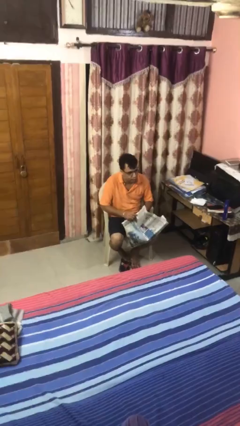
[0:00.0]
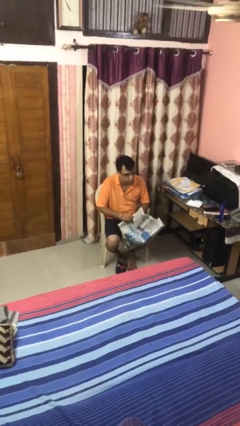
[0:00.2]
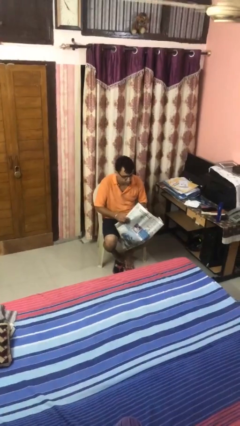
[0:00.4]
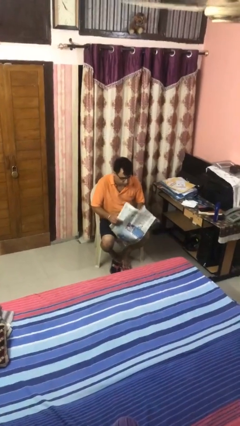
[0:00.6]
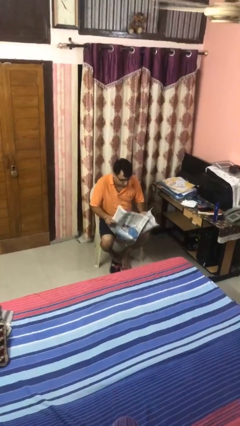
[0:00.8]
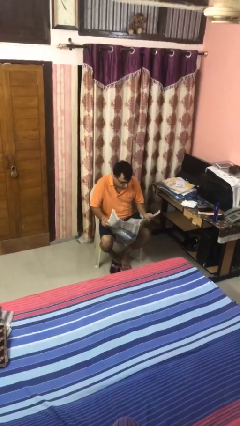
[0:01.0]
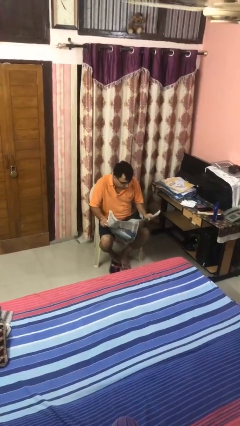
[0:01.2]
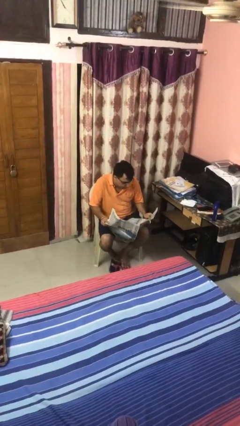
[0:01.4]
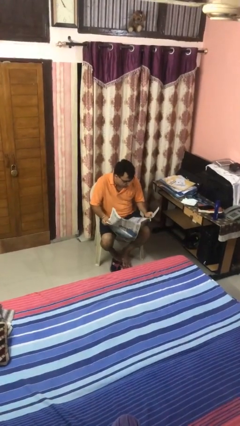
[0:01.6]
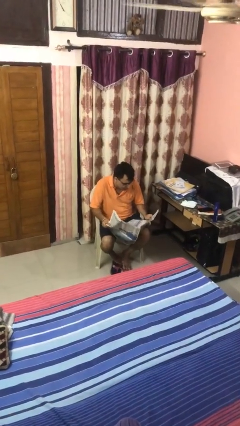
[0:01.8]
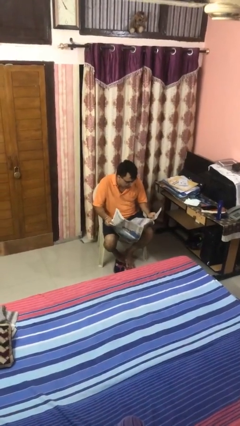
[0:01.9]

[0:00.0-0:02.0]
person reads newspaper

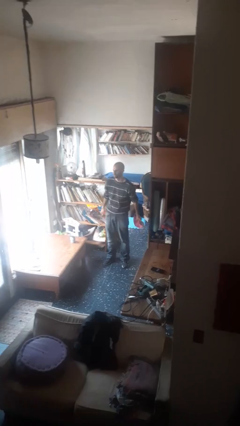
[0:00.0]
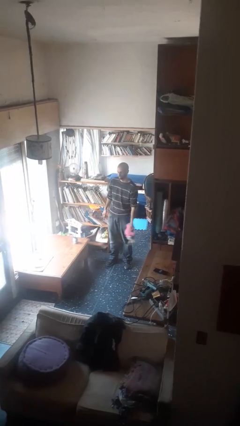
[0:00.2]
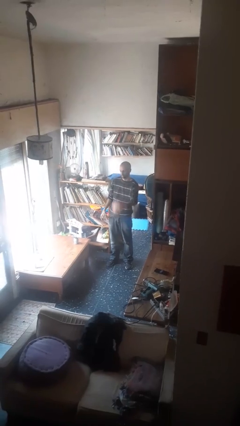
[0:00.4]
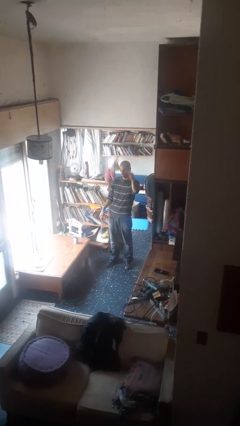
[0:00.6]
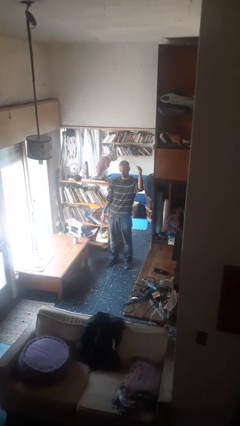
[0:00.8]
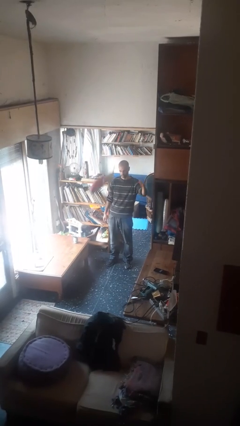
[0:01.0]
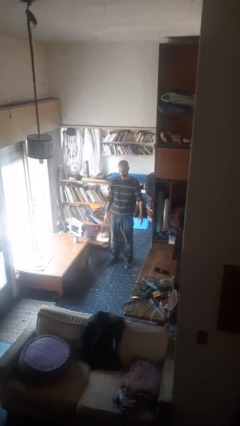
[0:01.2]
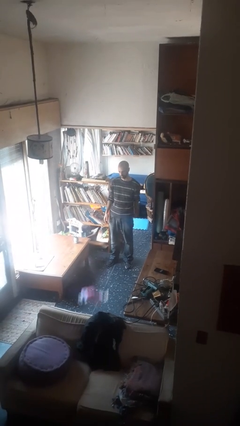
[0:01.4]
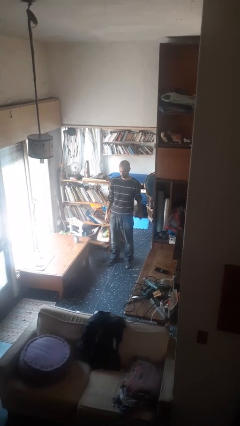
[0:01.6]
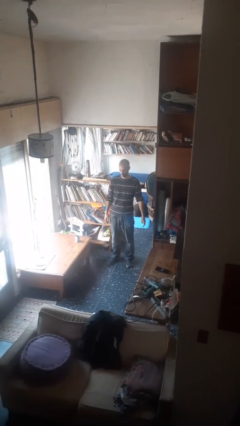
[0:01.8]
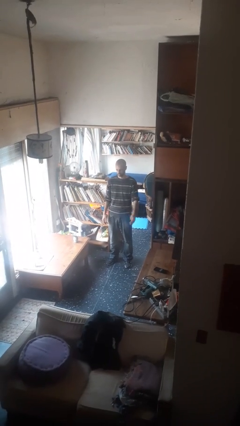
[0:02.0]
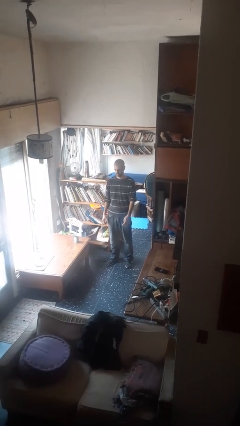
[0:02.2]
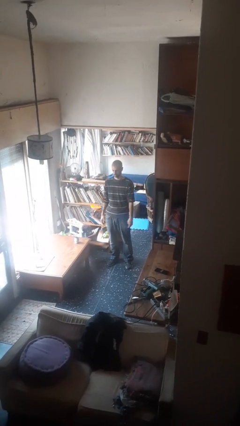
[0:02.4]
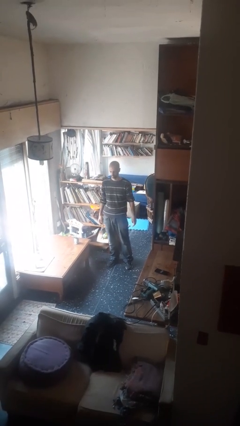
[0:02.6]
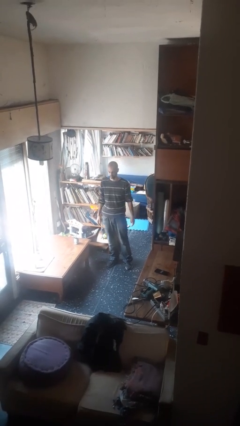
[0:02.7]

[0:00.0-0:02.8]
person throws object into air

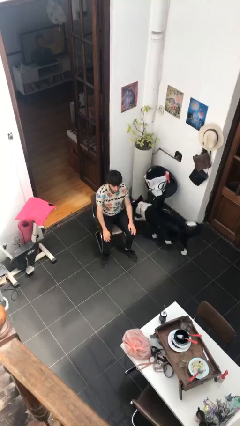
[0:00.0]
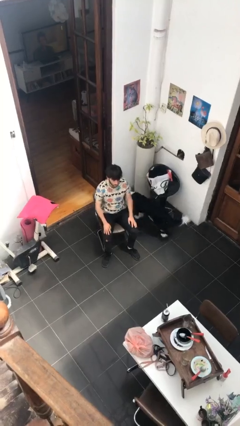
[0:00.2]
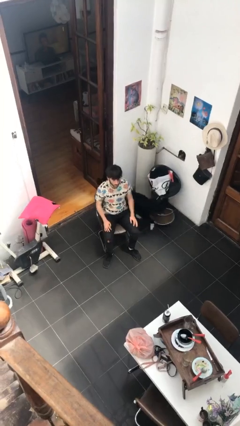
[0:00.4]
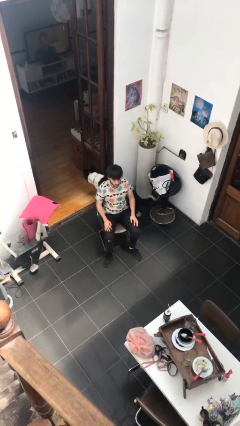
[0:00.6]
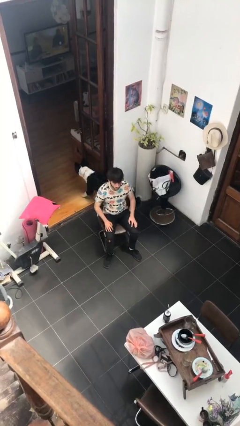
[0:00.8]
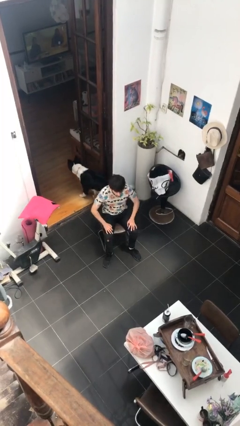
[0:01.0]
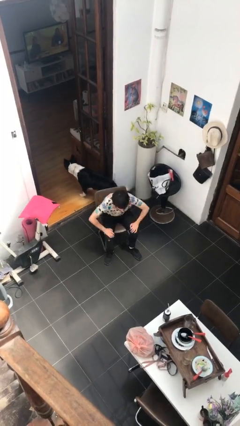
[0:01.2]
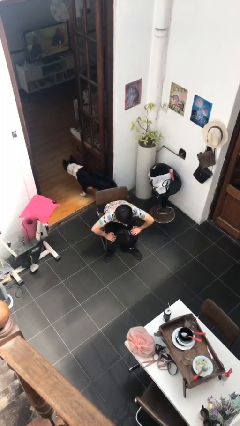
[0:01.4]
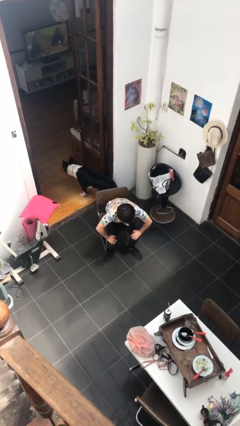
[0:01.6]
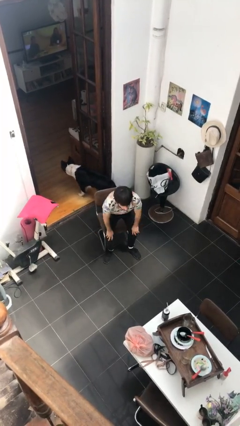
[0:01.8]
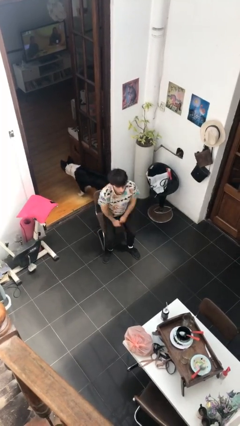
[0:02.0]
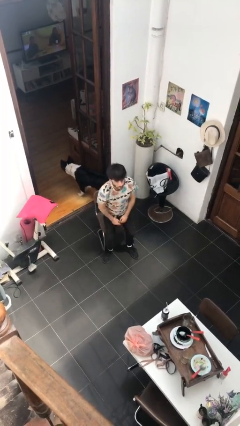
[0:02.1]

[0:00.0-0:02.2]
person stands up

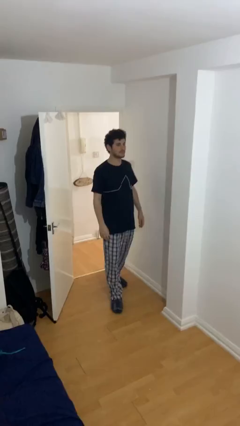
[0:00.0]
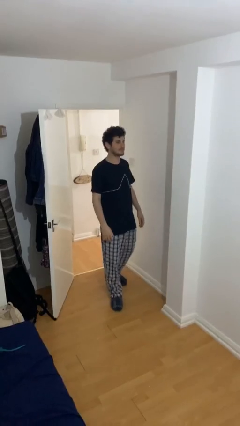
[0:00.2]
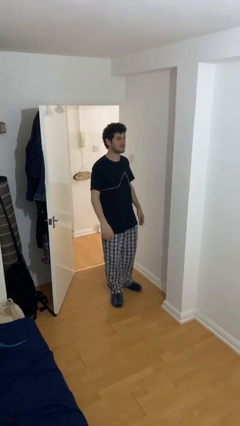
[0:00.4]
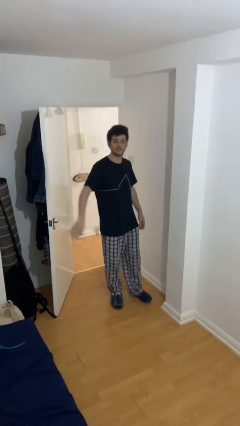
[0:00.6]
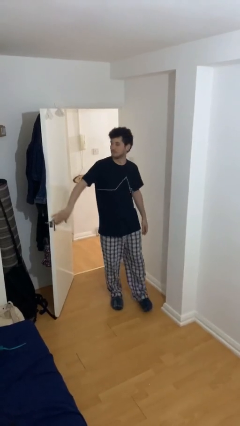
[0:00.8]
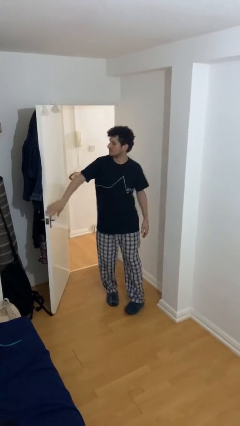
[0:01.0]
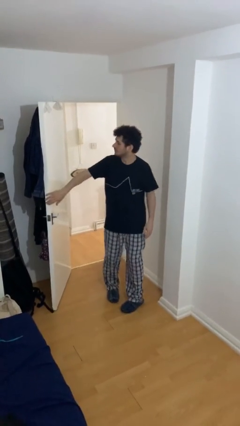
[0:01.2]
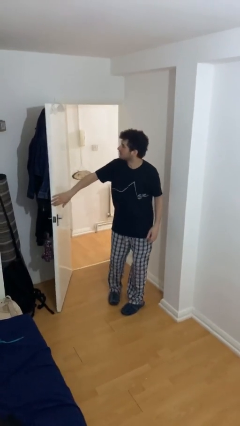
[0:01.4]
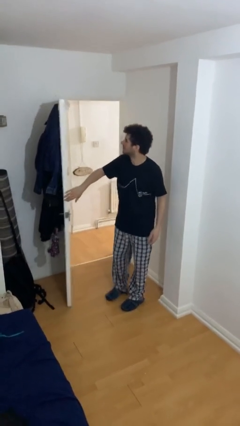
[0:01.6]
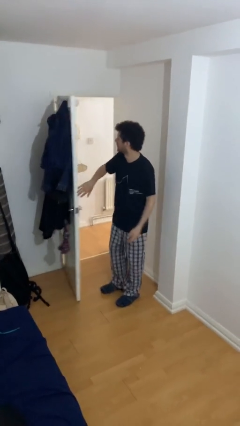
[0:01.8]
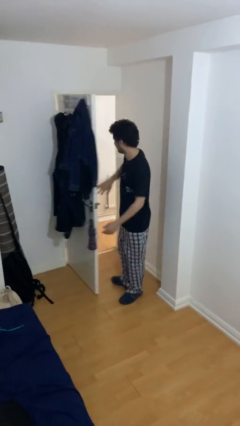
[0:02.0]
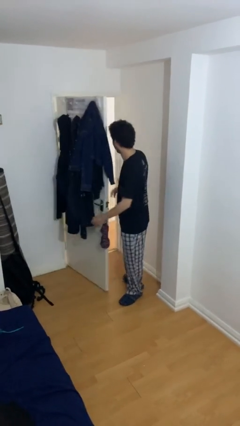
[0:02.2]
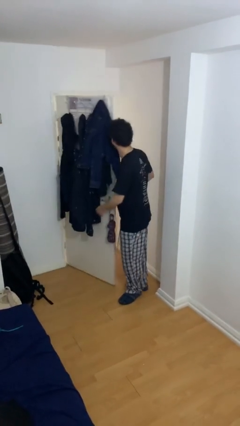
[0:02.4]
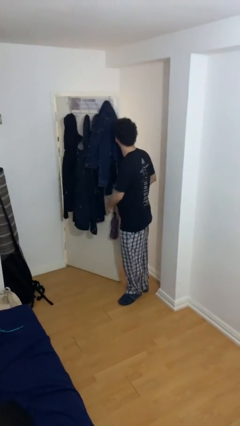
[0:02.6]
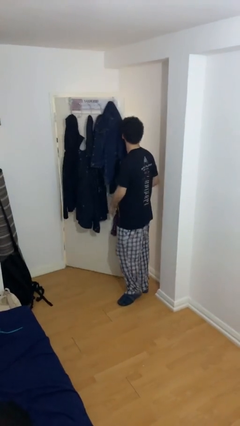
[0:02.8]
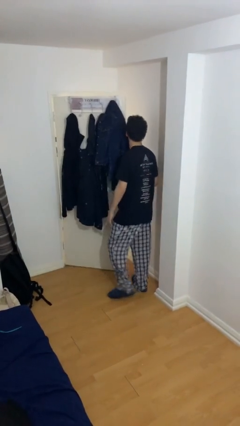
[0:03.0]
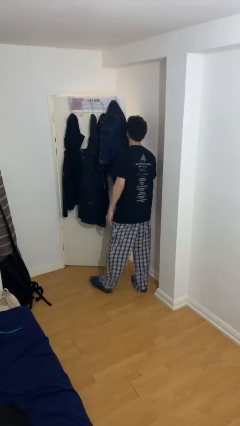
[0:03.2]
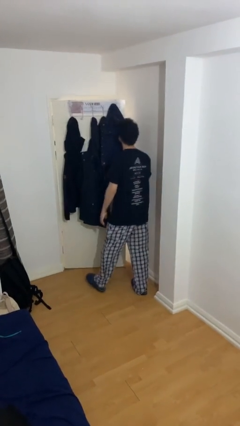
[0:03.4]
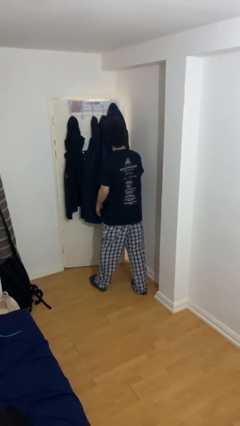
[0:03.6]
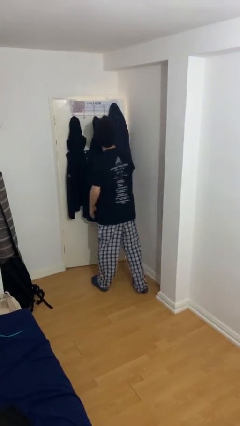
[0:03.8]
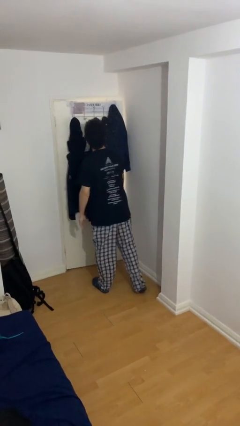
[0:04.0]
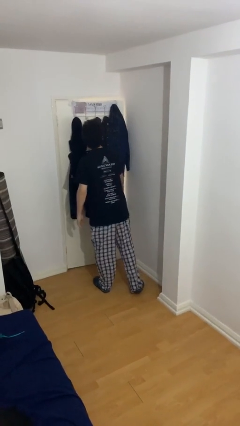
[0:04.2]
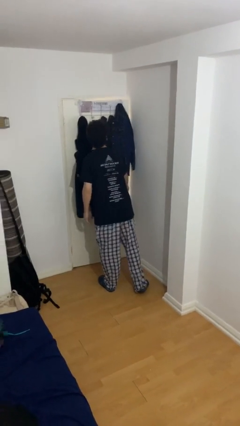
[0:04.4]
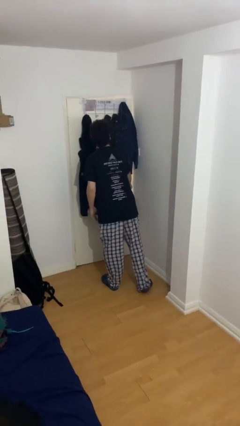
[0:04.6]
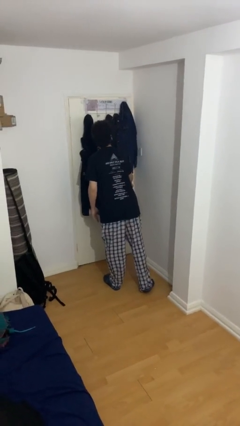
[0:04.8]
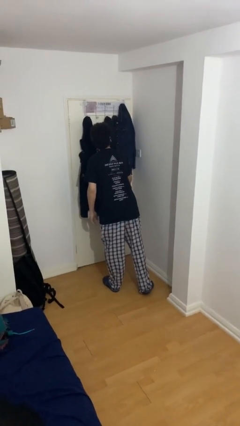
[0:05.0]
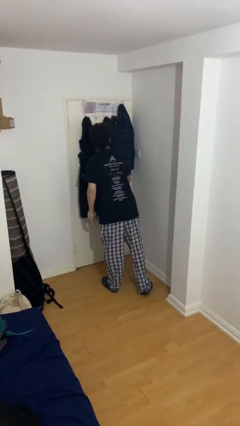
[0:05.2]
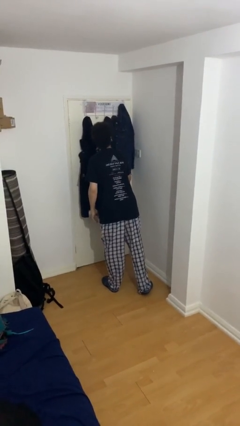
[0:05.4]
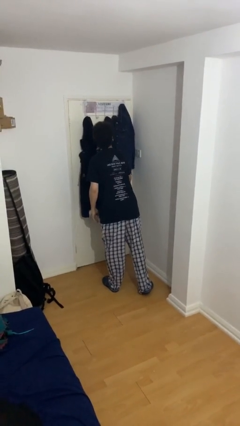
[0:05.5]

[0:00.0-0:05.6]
person closes facility door

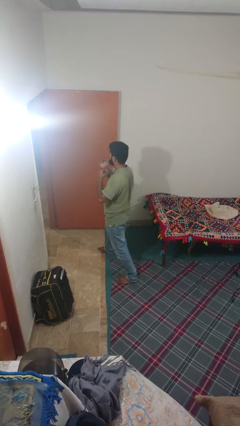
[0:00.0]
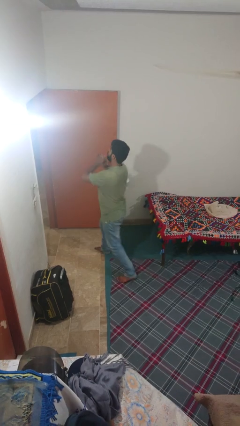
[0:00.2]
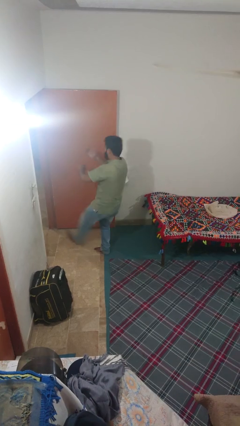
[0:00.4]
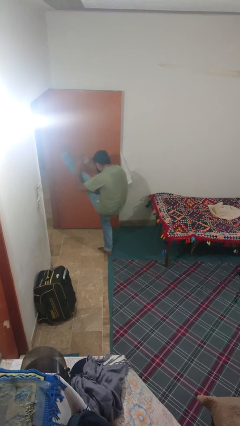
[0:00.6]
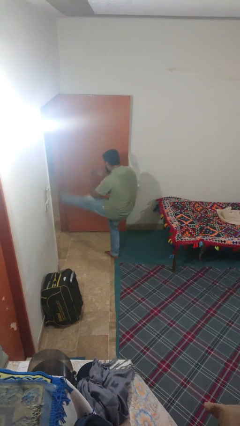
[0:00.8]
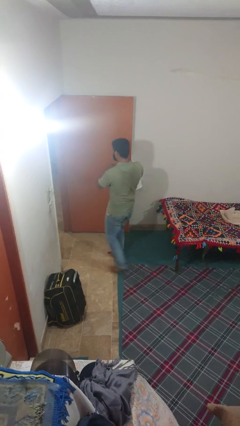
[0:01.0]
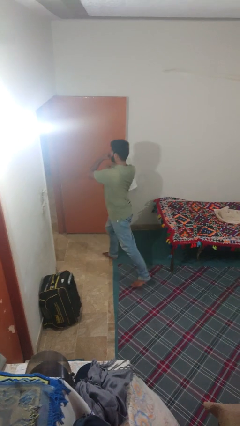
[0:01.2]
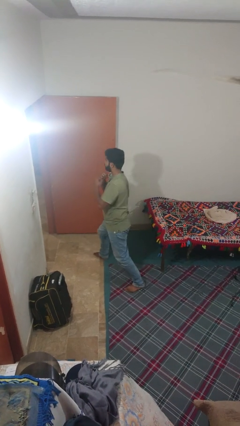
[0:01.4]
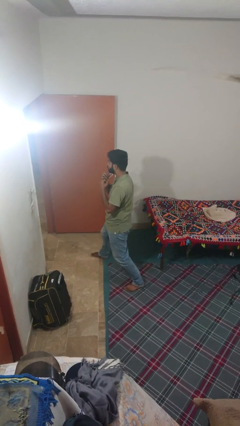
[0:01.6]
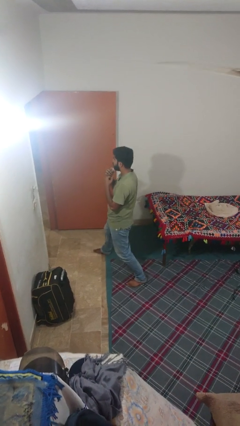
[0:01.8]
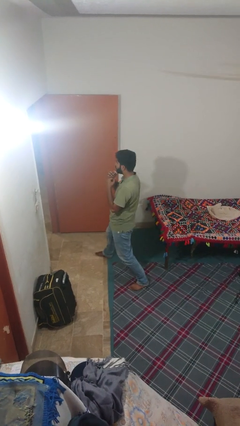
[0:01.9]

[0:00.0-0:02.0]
person karate kicks

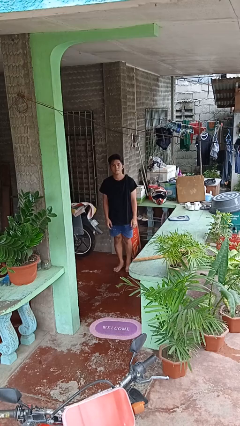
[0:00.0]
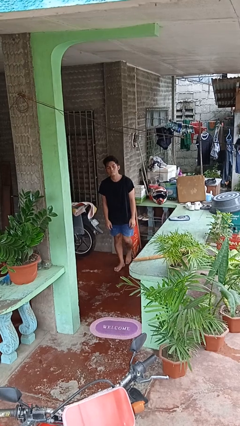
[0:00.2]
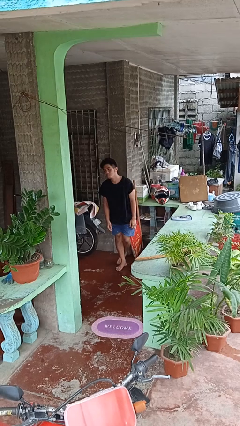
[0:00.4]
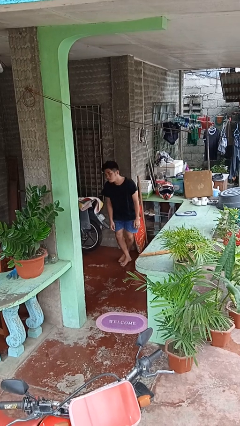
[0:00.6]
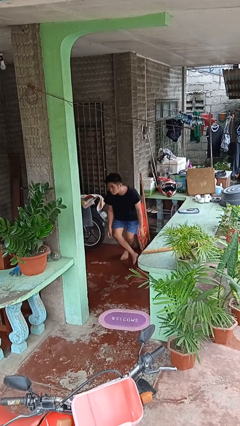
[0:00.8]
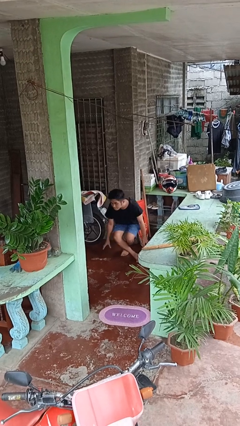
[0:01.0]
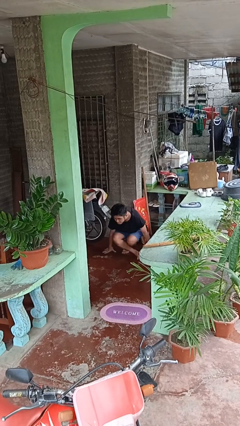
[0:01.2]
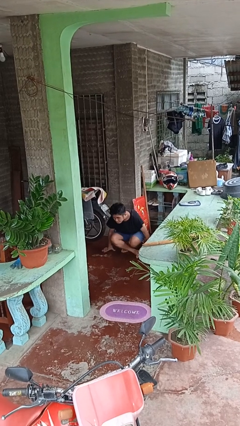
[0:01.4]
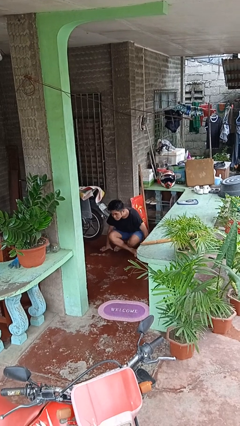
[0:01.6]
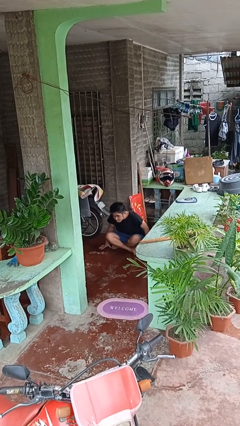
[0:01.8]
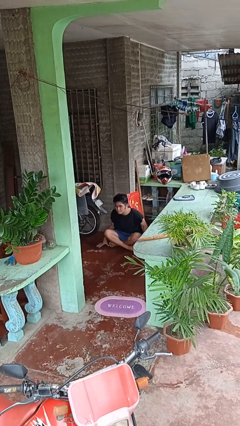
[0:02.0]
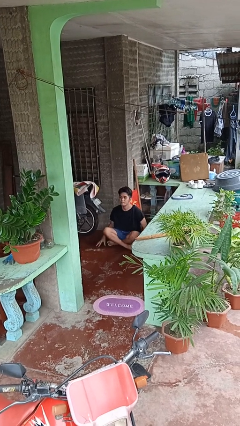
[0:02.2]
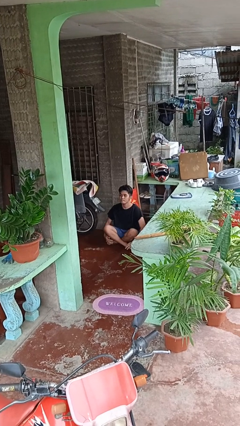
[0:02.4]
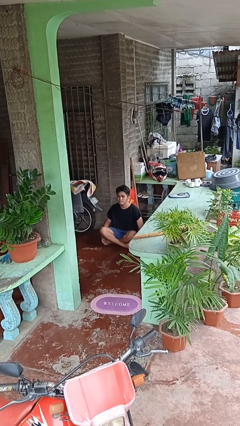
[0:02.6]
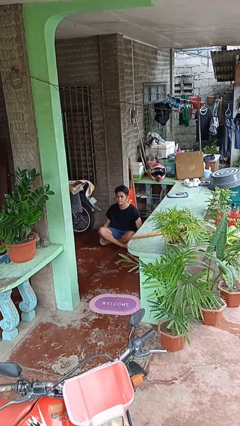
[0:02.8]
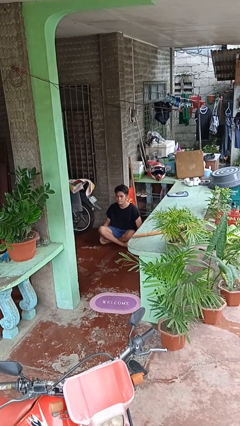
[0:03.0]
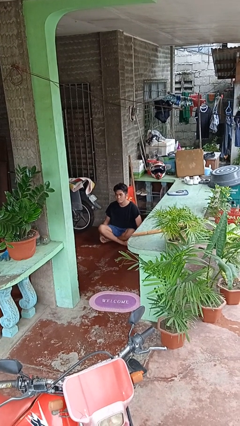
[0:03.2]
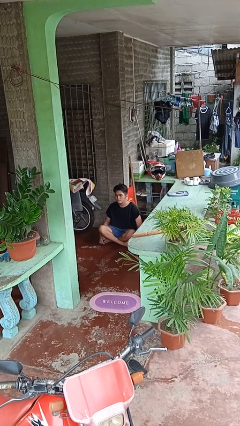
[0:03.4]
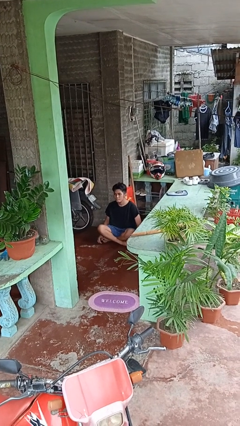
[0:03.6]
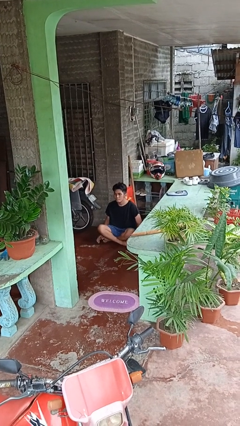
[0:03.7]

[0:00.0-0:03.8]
person sits crisscross
